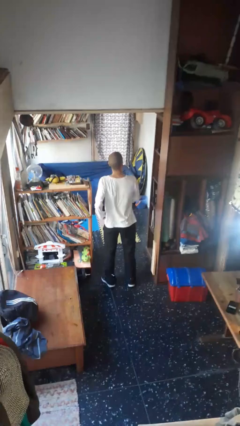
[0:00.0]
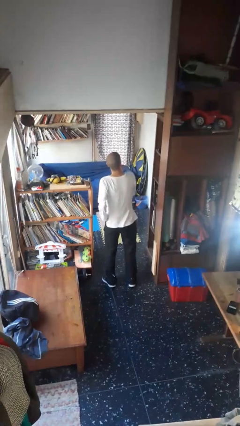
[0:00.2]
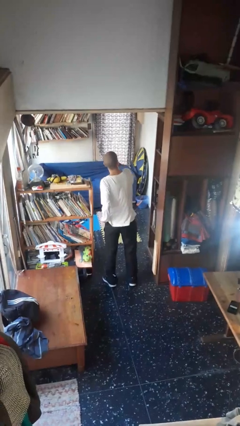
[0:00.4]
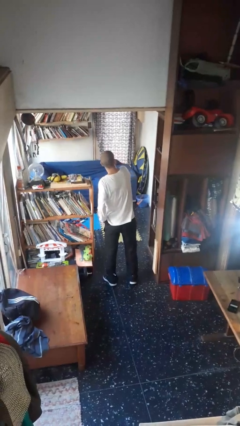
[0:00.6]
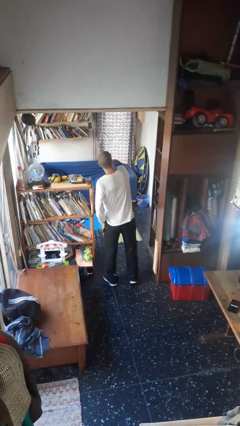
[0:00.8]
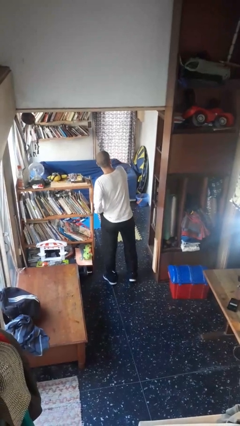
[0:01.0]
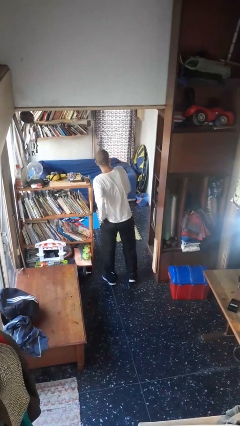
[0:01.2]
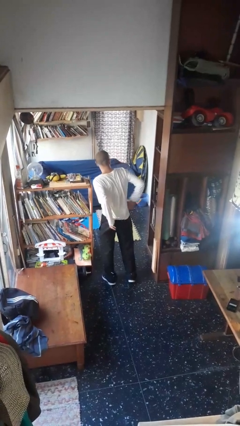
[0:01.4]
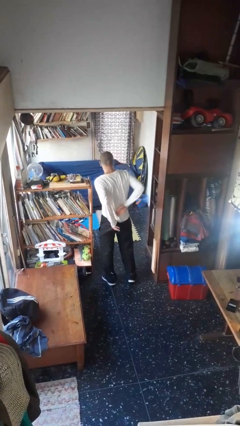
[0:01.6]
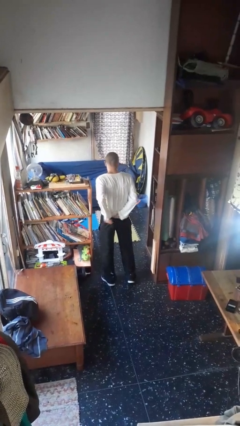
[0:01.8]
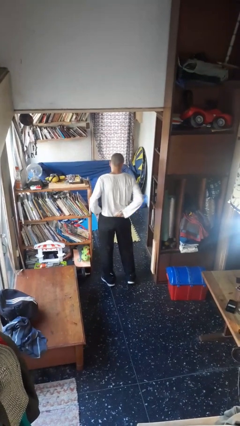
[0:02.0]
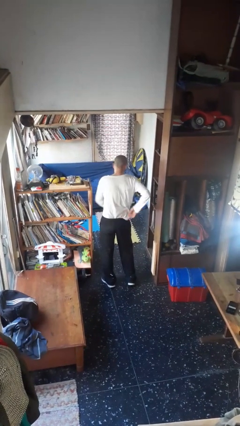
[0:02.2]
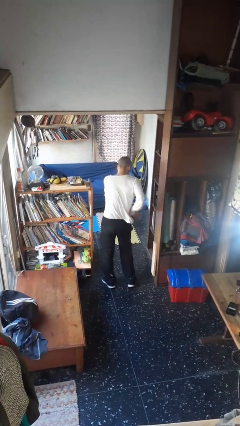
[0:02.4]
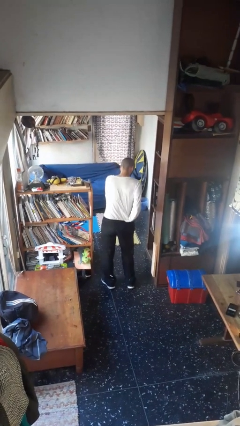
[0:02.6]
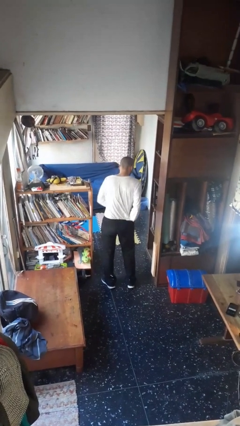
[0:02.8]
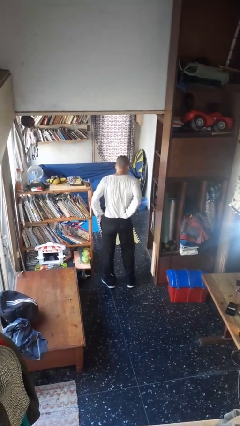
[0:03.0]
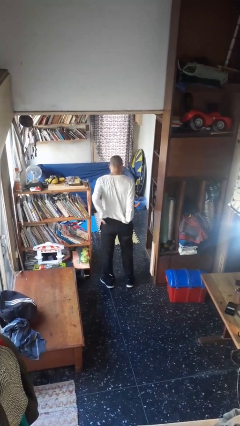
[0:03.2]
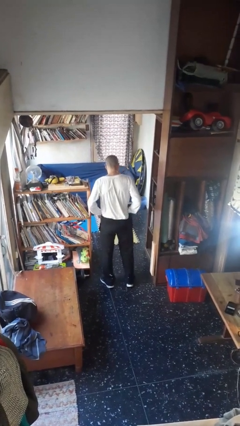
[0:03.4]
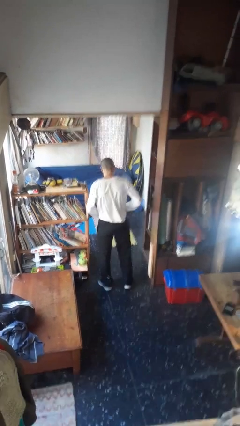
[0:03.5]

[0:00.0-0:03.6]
person tucks in shirt

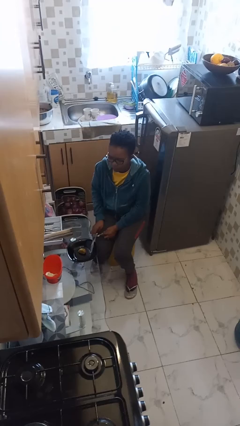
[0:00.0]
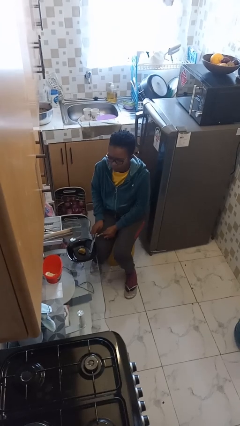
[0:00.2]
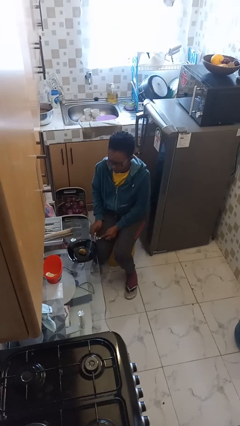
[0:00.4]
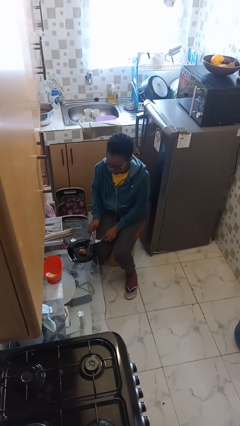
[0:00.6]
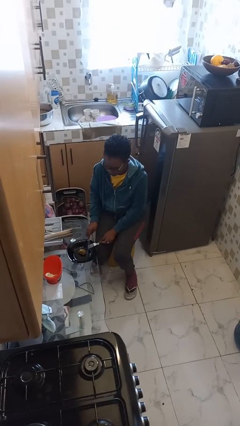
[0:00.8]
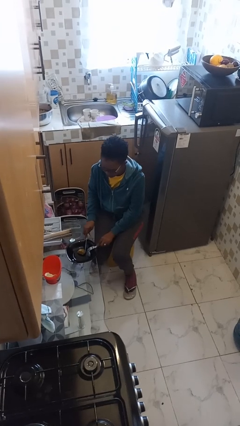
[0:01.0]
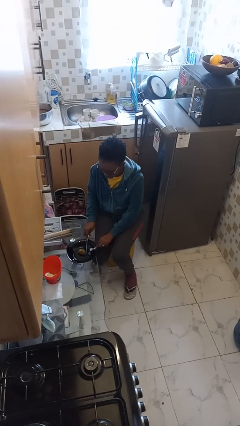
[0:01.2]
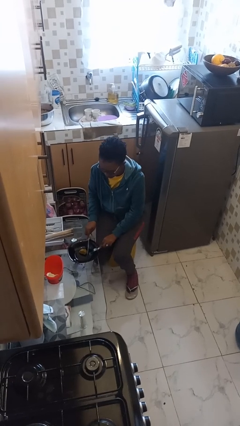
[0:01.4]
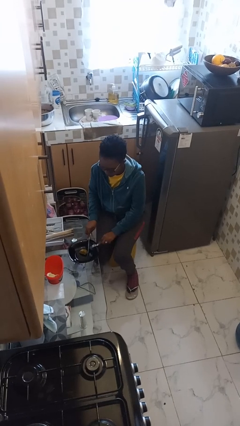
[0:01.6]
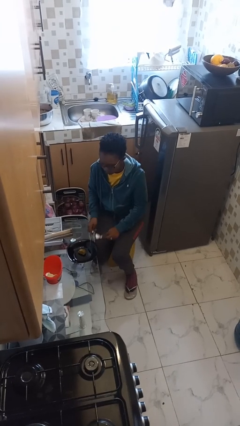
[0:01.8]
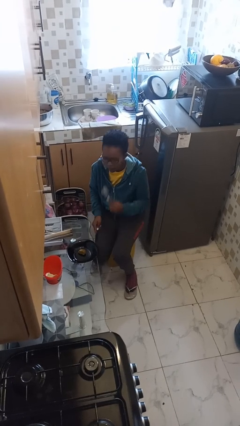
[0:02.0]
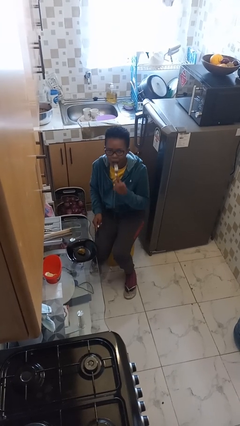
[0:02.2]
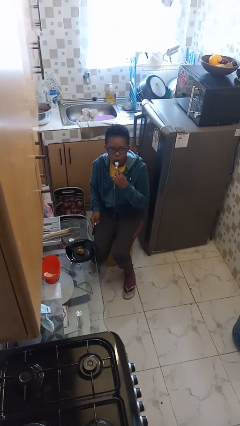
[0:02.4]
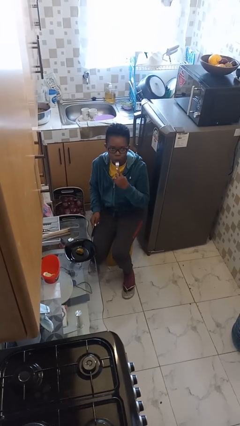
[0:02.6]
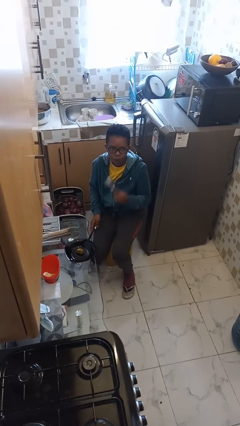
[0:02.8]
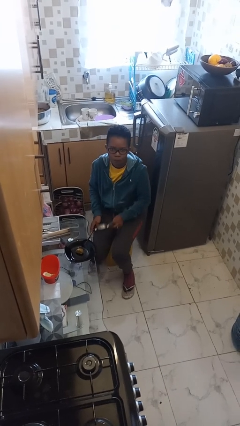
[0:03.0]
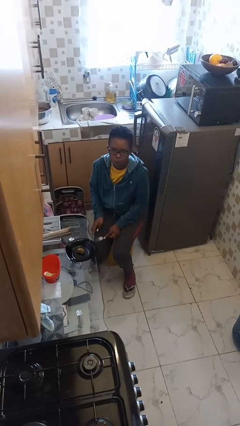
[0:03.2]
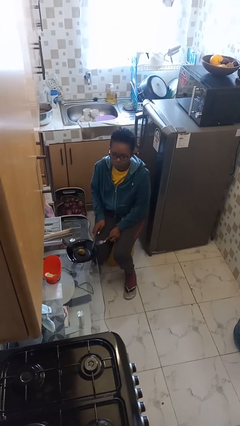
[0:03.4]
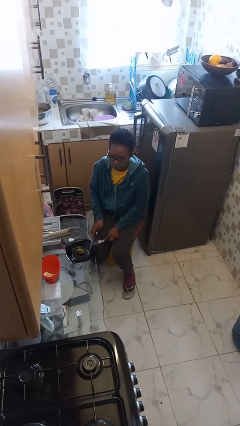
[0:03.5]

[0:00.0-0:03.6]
person eats with utensil

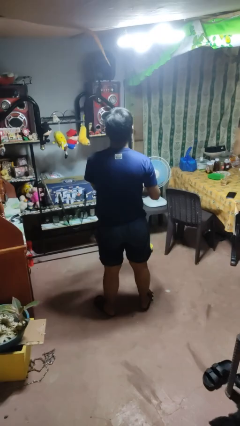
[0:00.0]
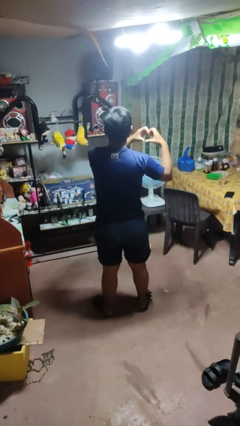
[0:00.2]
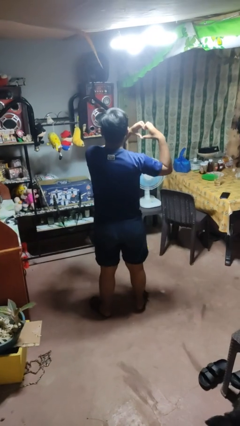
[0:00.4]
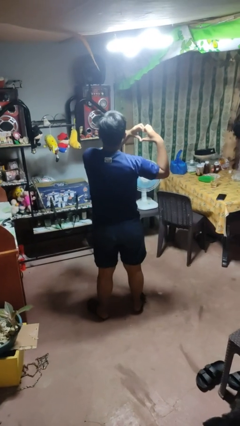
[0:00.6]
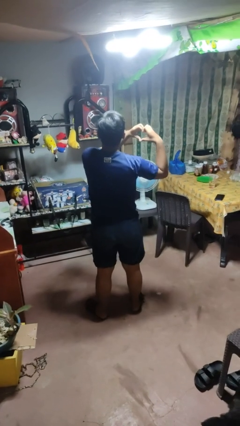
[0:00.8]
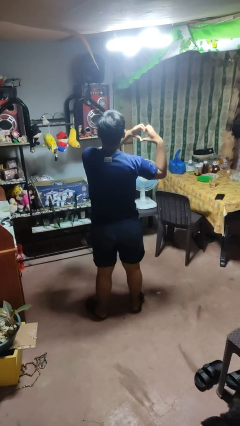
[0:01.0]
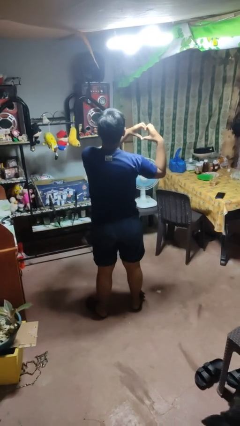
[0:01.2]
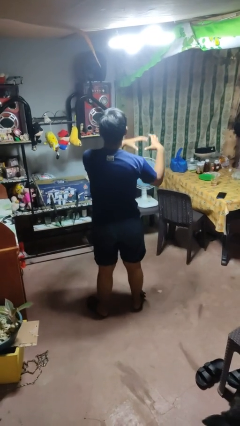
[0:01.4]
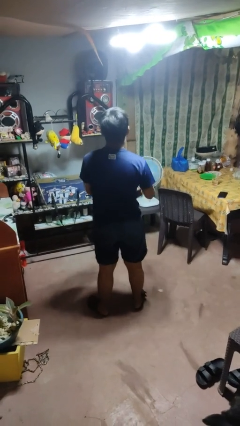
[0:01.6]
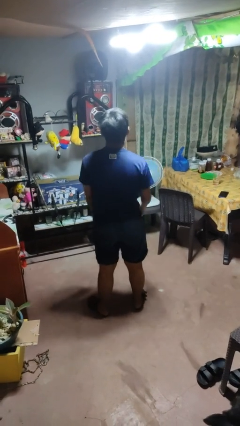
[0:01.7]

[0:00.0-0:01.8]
person gestures heart

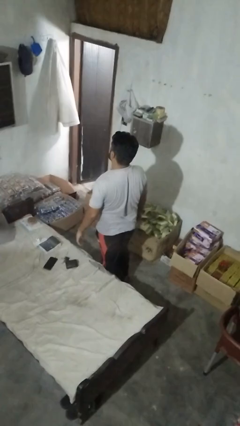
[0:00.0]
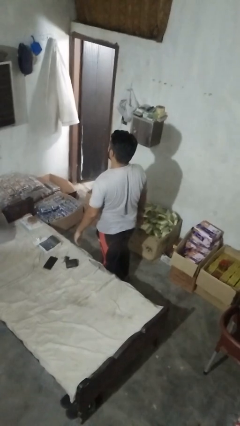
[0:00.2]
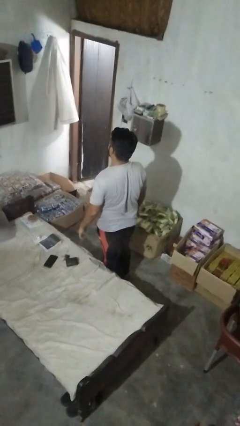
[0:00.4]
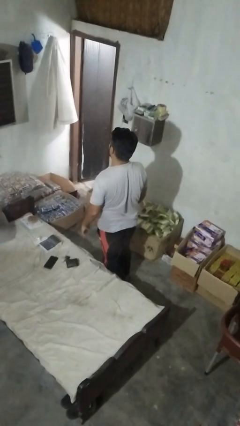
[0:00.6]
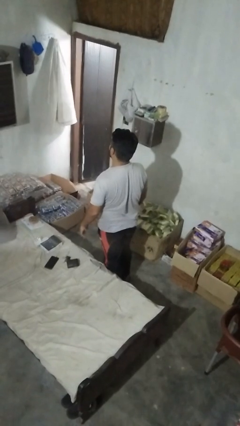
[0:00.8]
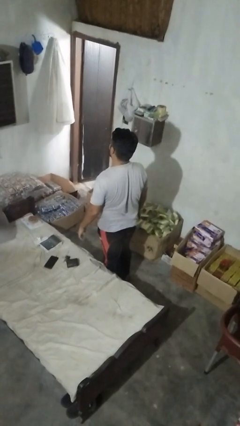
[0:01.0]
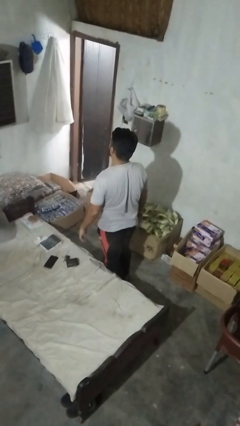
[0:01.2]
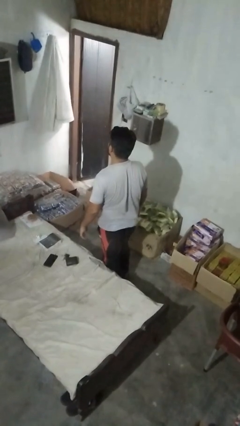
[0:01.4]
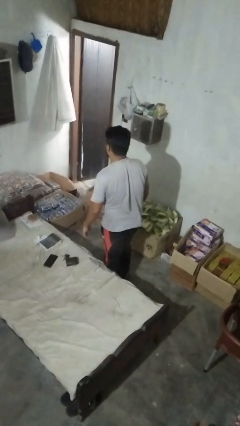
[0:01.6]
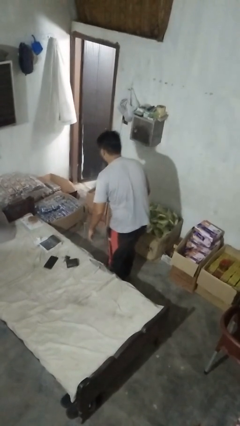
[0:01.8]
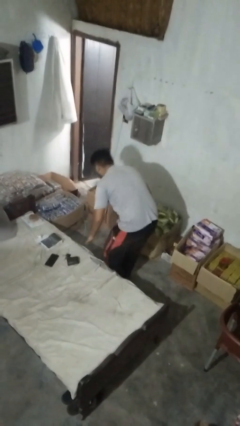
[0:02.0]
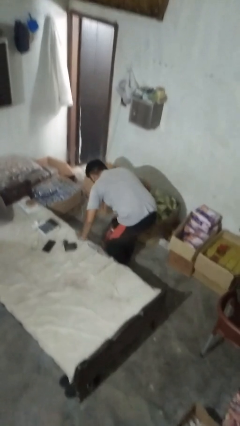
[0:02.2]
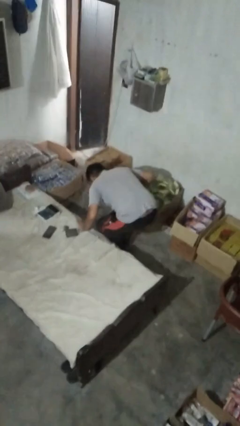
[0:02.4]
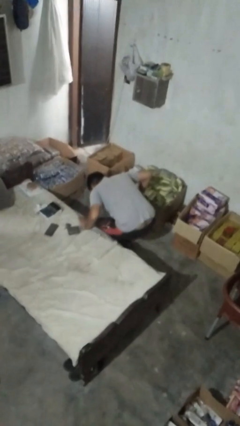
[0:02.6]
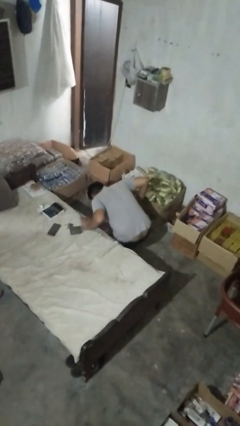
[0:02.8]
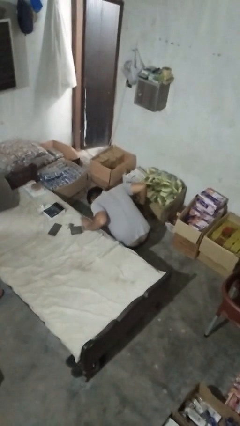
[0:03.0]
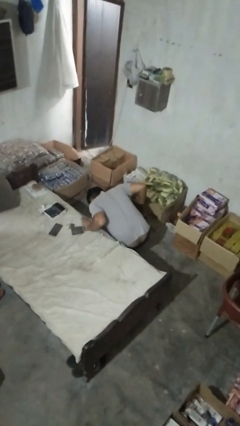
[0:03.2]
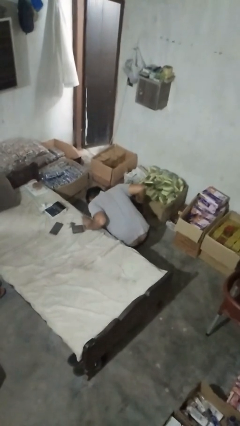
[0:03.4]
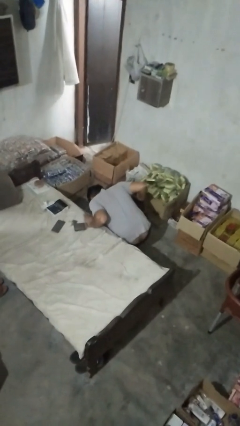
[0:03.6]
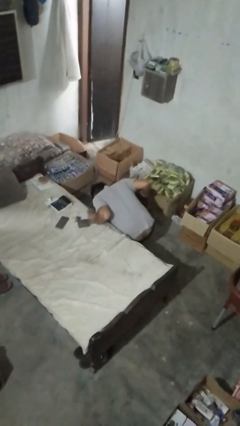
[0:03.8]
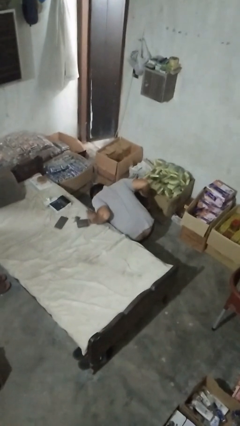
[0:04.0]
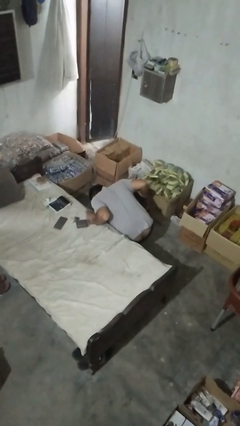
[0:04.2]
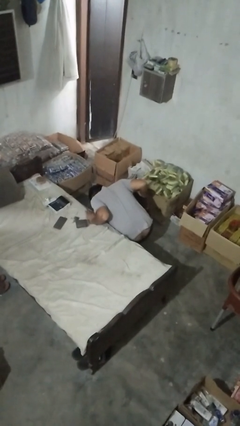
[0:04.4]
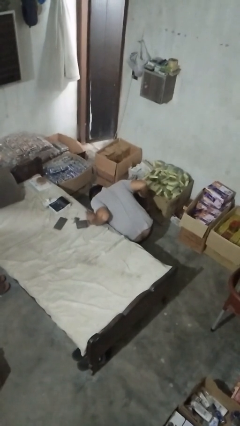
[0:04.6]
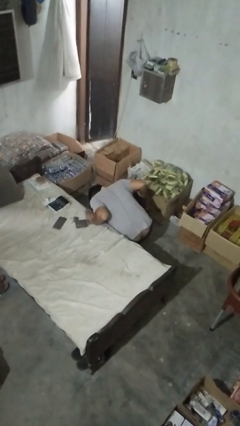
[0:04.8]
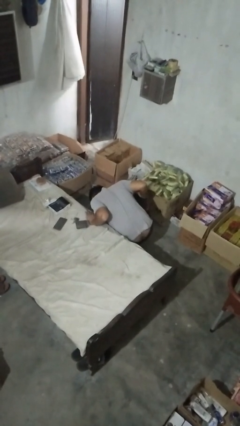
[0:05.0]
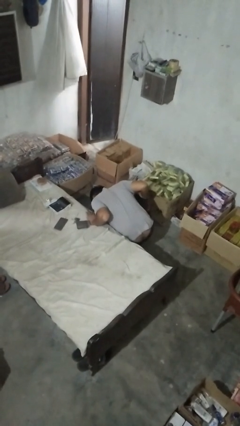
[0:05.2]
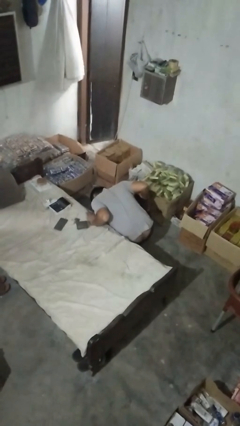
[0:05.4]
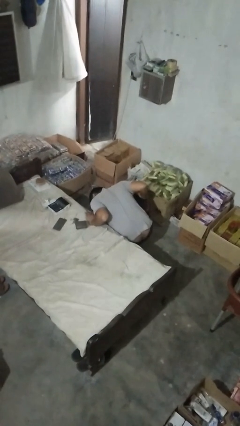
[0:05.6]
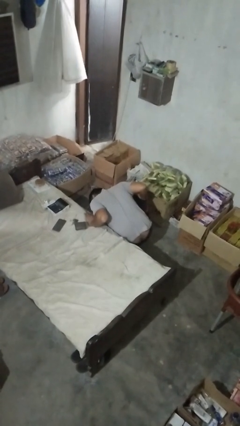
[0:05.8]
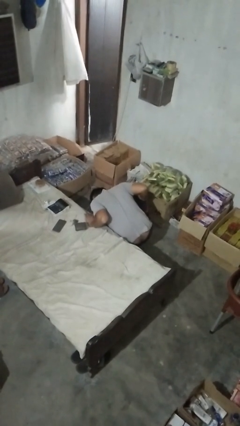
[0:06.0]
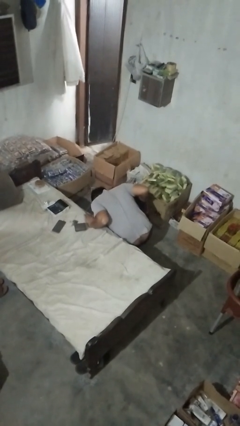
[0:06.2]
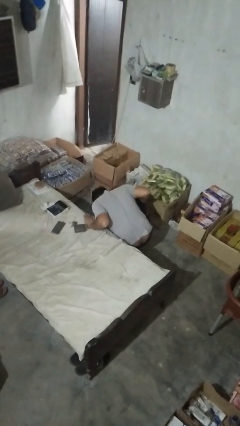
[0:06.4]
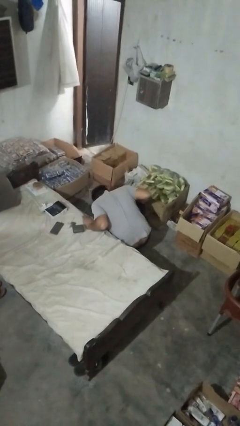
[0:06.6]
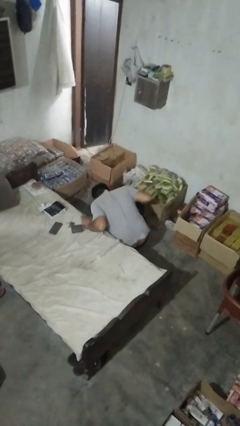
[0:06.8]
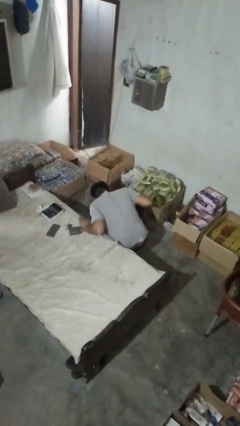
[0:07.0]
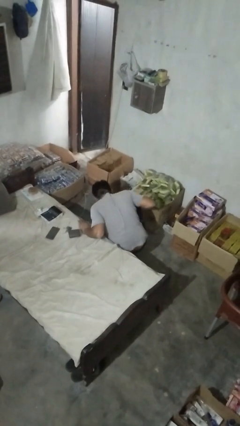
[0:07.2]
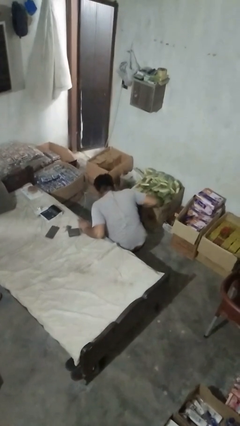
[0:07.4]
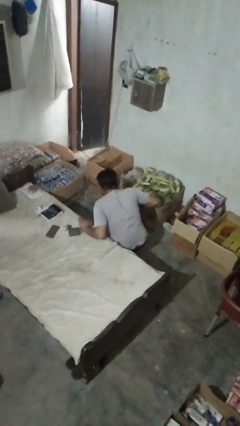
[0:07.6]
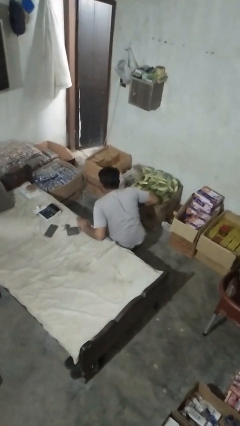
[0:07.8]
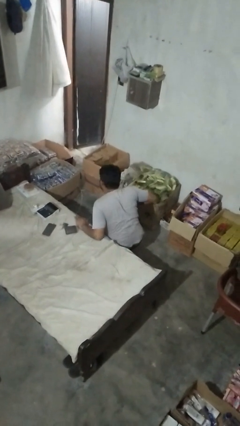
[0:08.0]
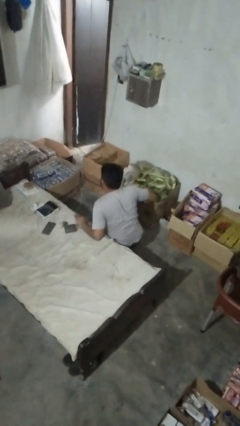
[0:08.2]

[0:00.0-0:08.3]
person searches under couch

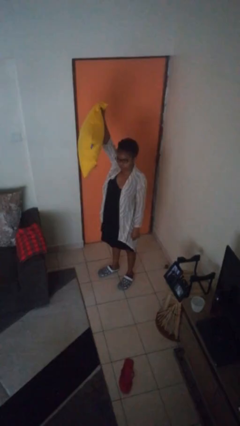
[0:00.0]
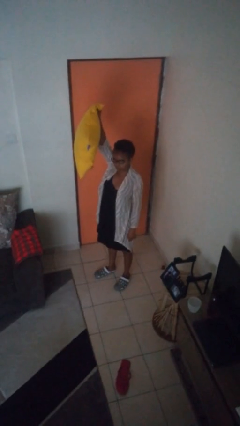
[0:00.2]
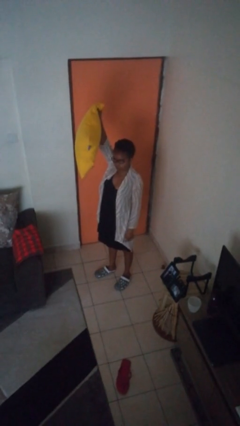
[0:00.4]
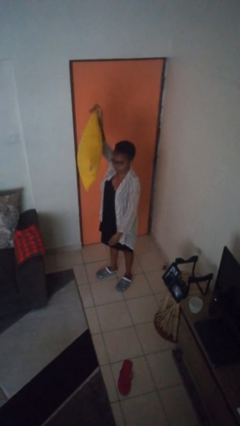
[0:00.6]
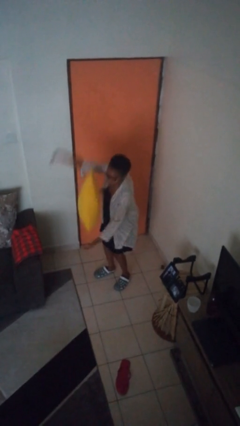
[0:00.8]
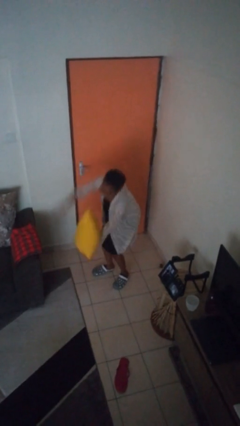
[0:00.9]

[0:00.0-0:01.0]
person drops object
